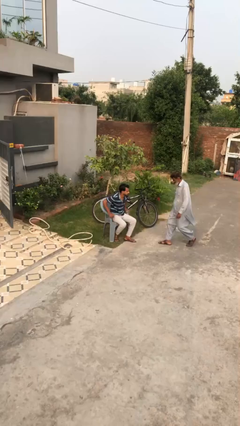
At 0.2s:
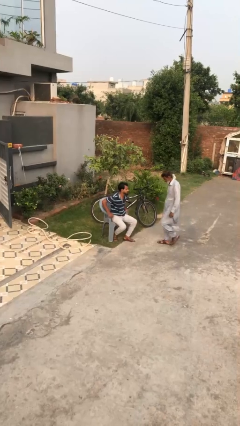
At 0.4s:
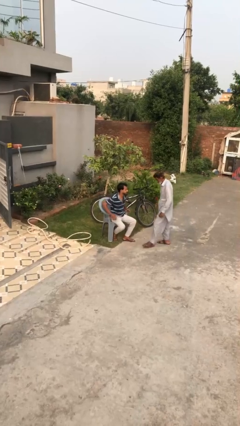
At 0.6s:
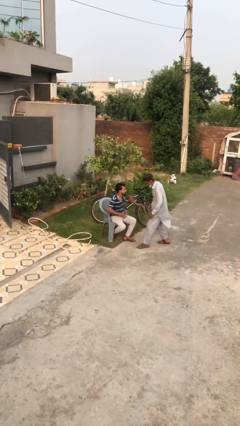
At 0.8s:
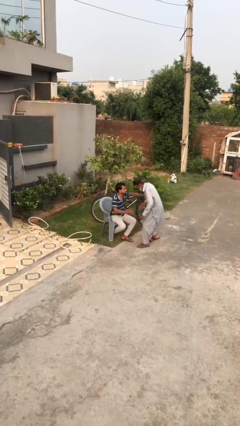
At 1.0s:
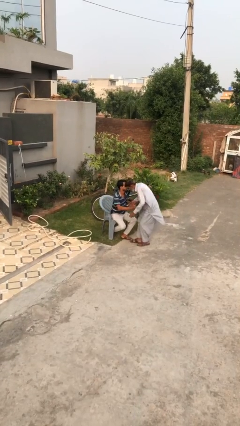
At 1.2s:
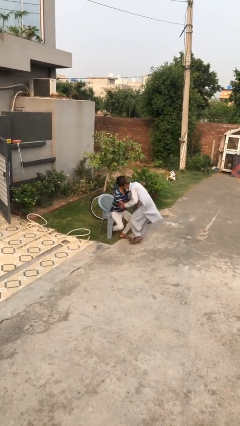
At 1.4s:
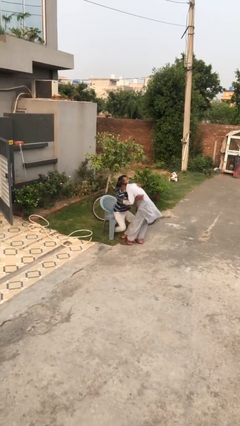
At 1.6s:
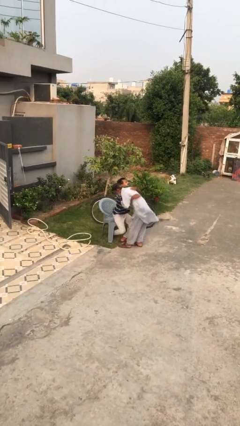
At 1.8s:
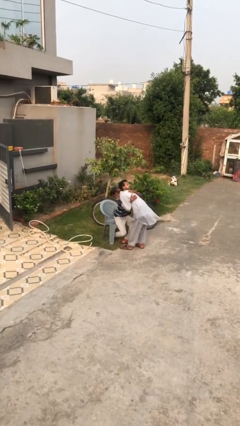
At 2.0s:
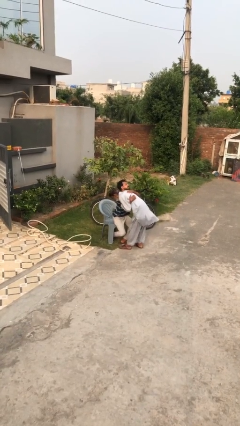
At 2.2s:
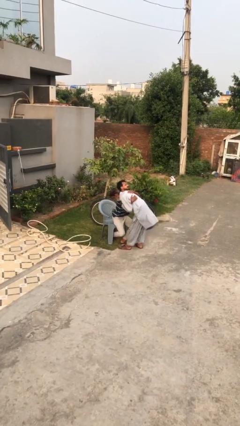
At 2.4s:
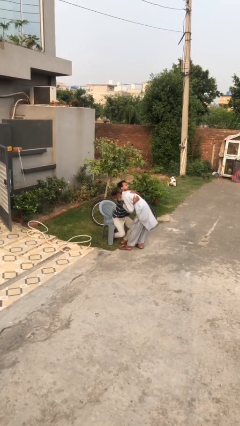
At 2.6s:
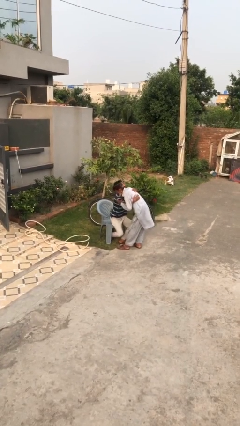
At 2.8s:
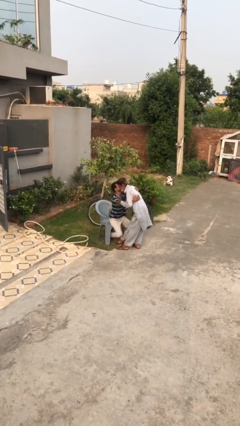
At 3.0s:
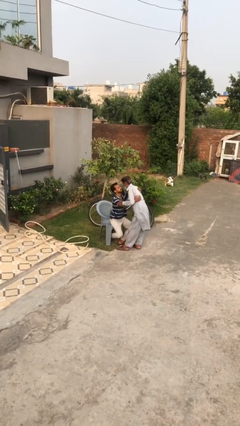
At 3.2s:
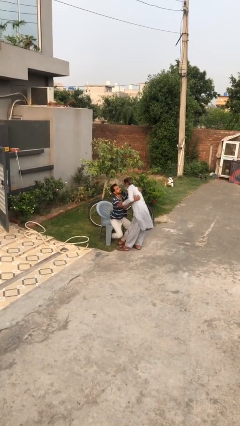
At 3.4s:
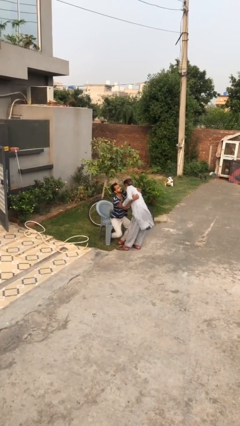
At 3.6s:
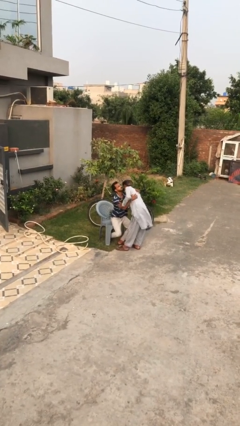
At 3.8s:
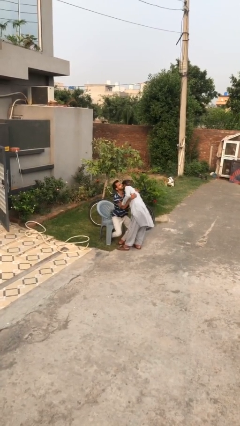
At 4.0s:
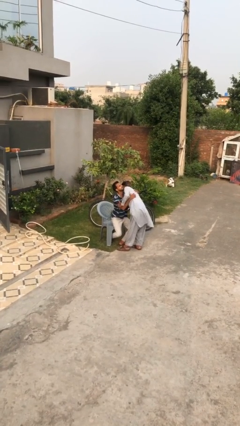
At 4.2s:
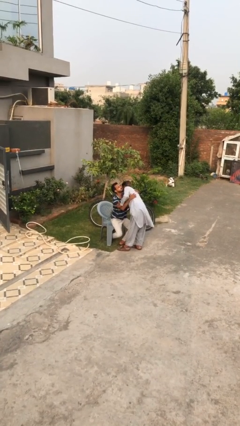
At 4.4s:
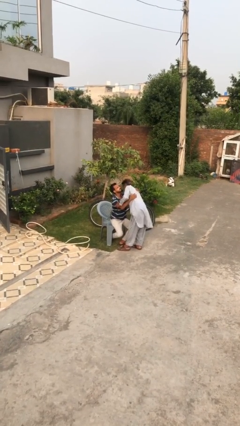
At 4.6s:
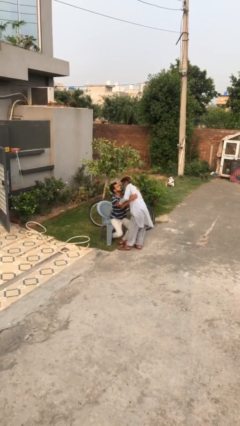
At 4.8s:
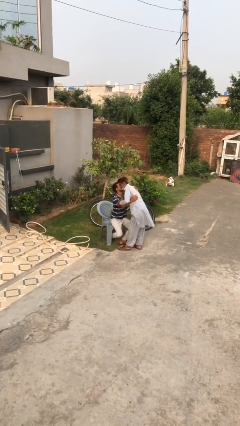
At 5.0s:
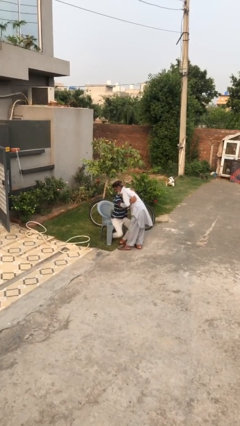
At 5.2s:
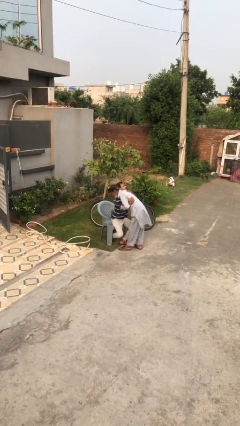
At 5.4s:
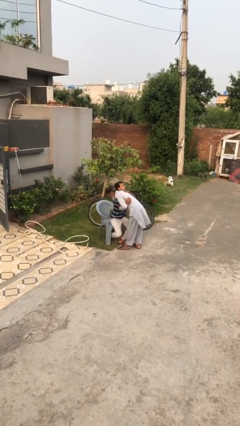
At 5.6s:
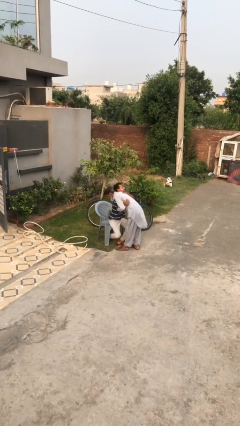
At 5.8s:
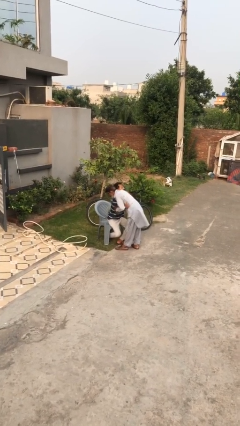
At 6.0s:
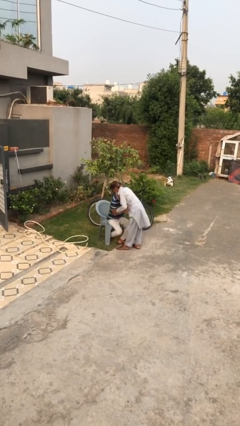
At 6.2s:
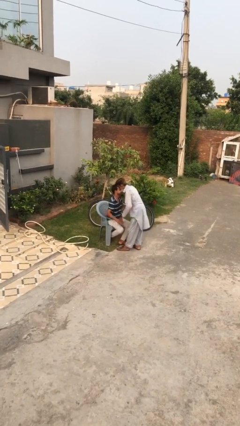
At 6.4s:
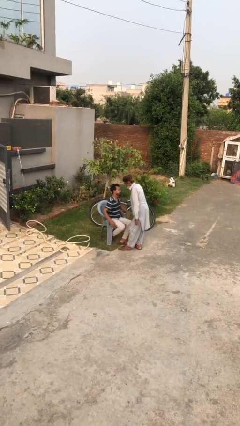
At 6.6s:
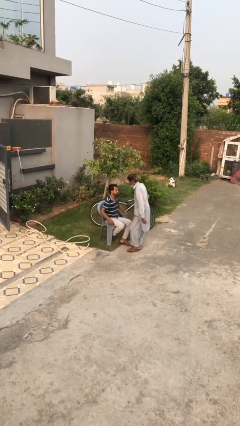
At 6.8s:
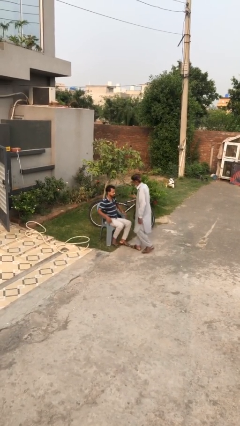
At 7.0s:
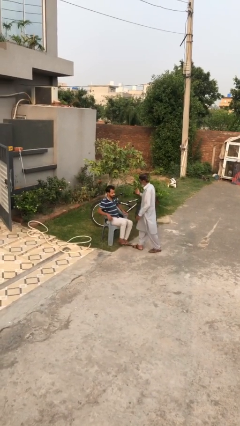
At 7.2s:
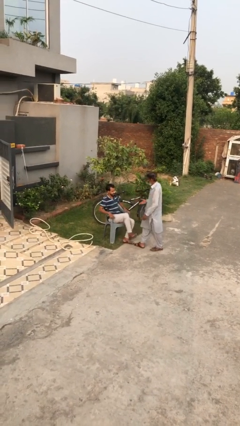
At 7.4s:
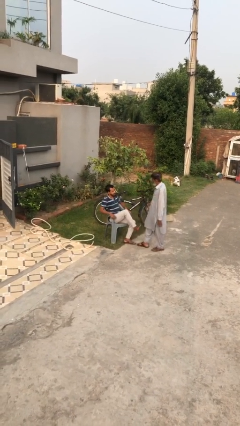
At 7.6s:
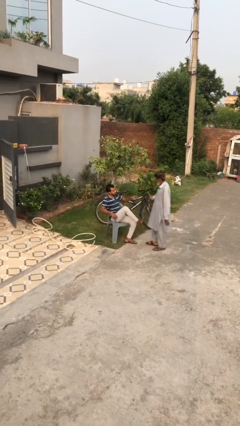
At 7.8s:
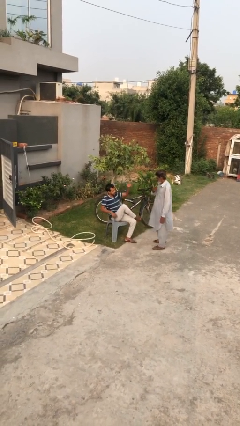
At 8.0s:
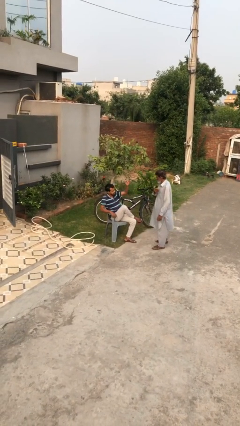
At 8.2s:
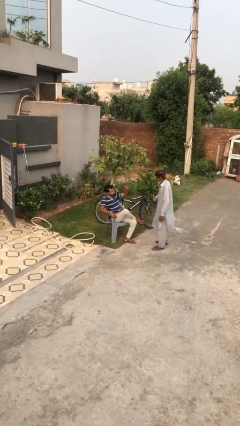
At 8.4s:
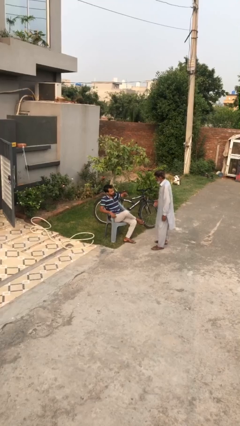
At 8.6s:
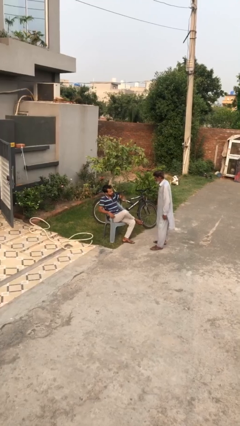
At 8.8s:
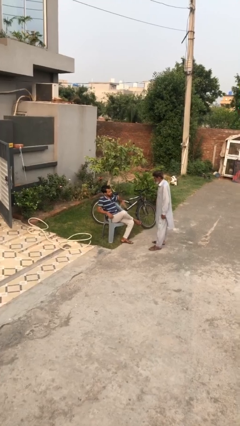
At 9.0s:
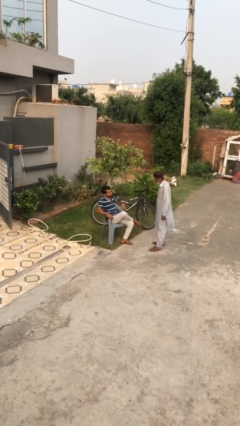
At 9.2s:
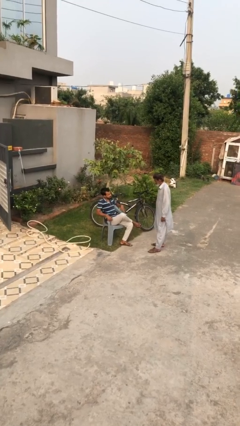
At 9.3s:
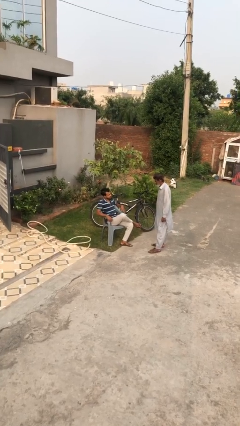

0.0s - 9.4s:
person embraces person

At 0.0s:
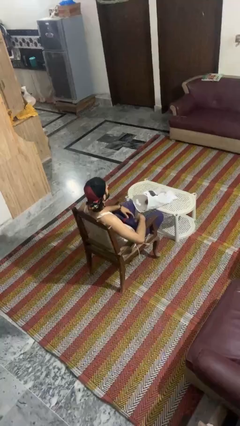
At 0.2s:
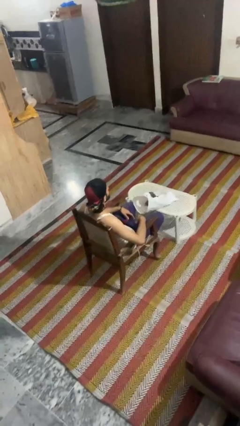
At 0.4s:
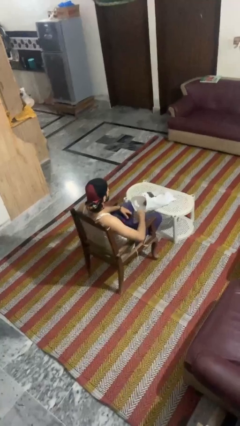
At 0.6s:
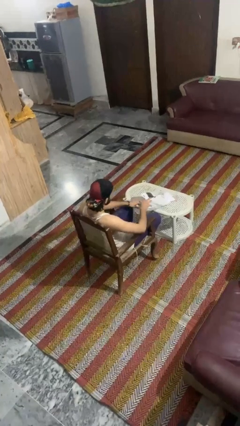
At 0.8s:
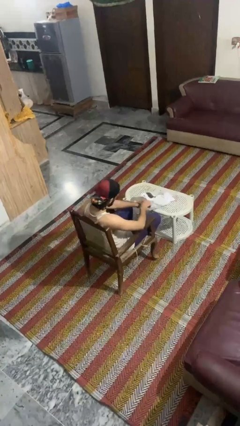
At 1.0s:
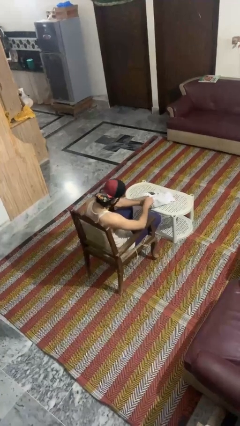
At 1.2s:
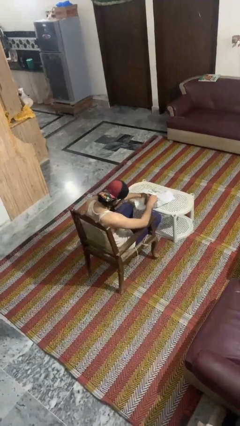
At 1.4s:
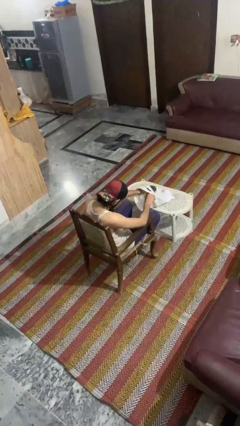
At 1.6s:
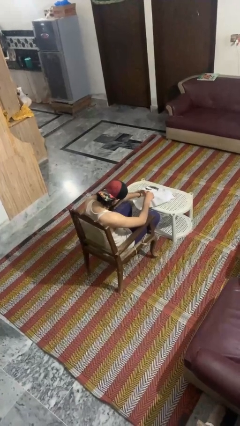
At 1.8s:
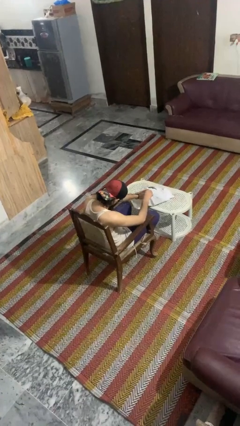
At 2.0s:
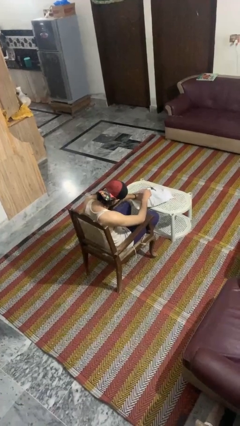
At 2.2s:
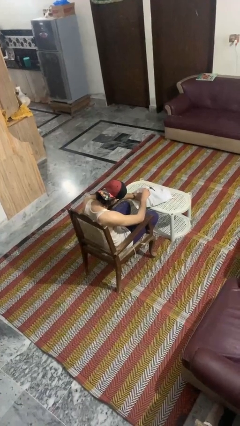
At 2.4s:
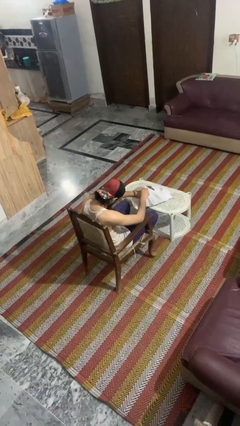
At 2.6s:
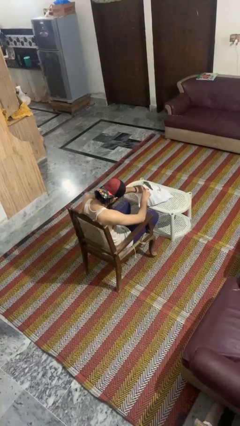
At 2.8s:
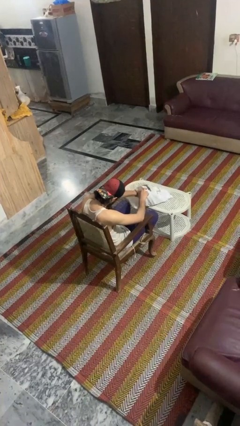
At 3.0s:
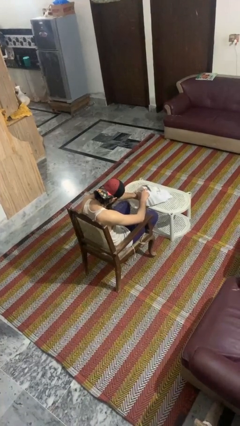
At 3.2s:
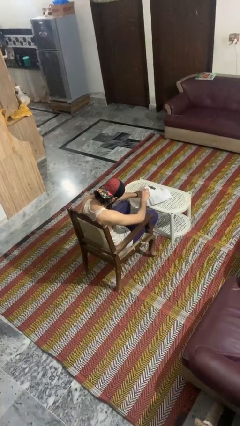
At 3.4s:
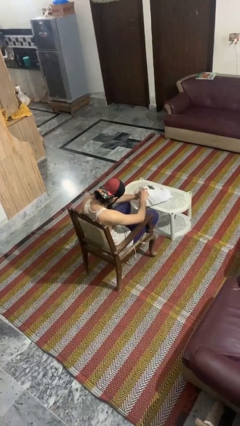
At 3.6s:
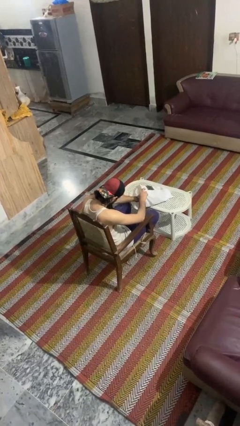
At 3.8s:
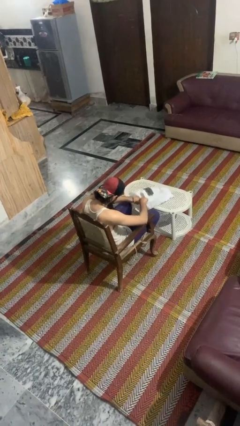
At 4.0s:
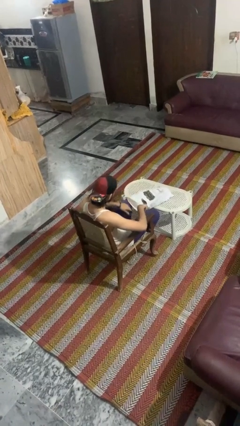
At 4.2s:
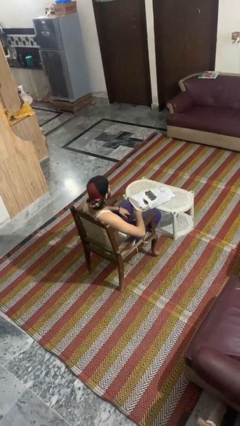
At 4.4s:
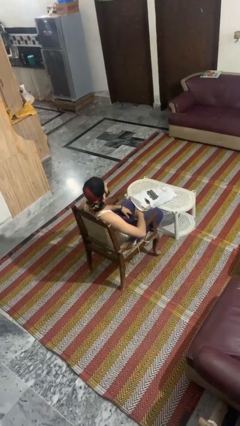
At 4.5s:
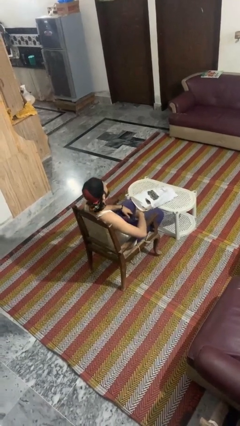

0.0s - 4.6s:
person searches in bag

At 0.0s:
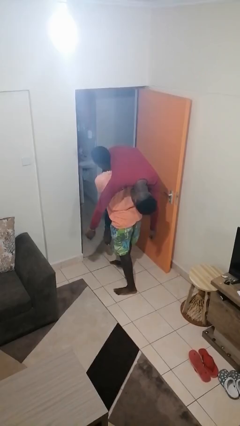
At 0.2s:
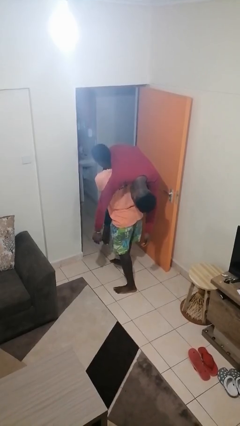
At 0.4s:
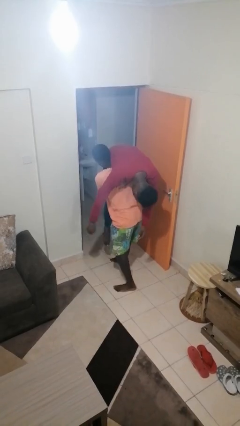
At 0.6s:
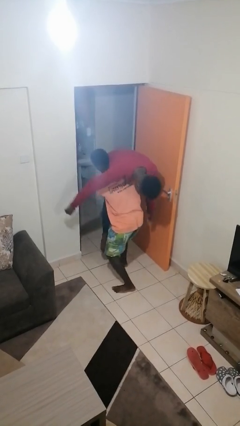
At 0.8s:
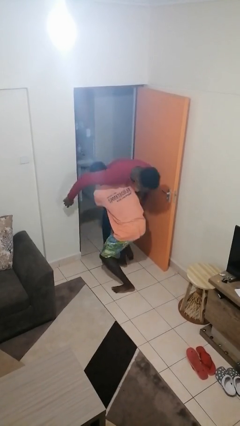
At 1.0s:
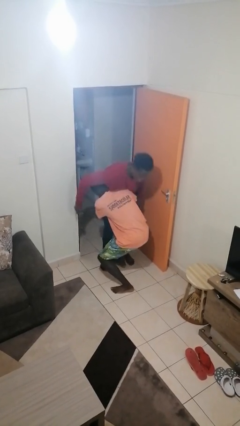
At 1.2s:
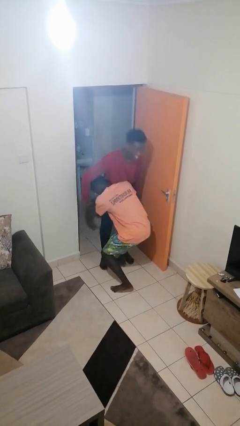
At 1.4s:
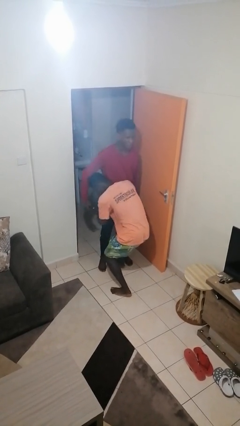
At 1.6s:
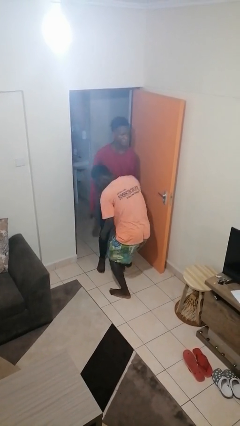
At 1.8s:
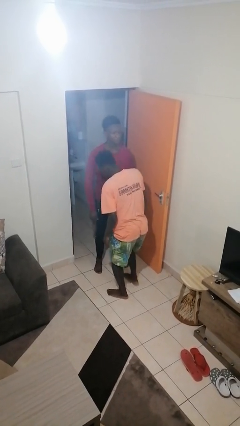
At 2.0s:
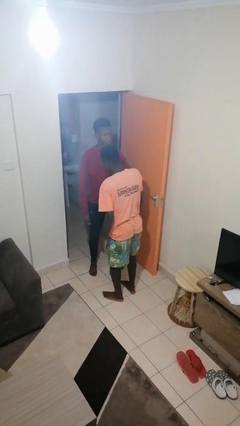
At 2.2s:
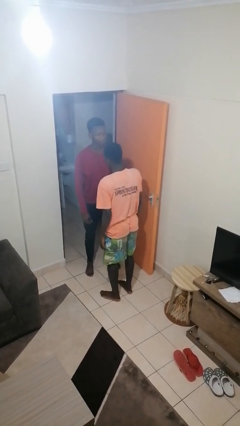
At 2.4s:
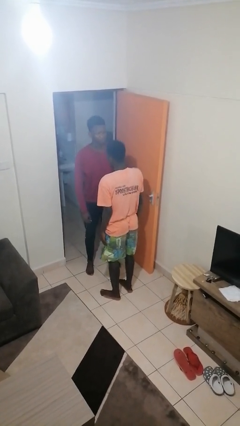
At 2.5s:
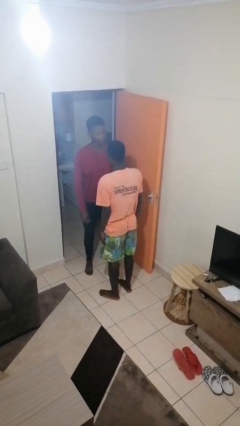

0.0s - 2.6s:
person puts down person

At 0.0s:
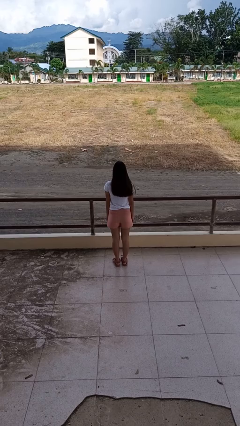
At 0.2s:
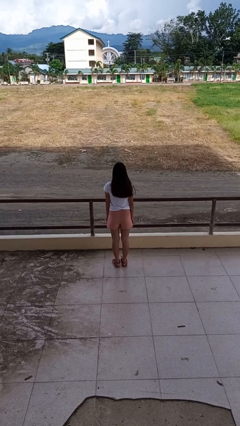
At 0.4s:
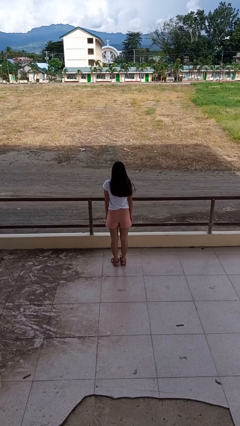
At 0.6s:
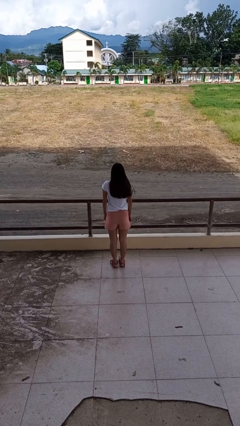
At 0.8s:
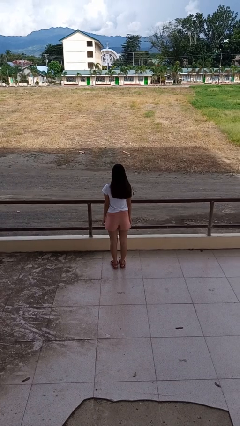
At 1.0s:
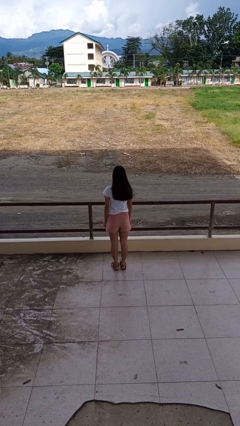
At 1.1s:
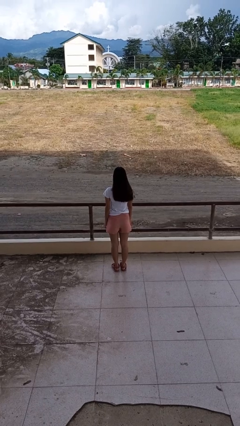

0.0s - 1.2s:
person shrugs
